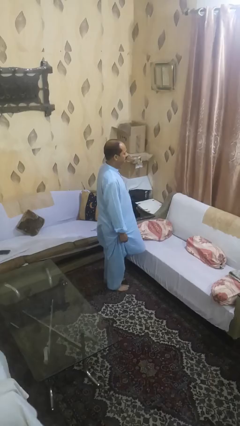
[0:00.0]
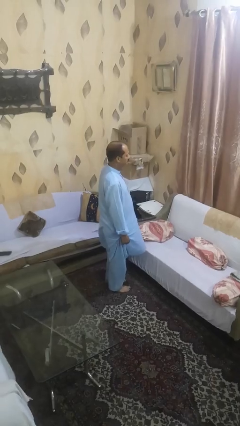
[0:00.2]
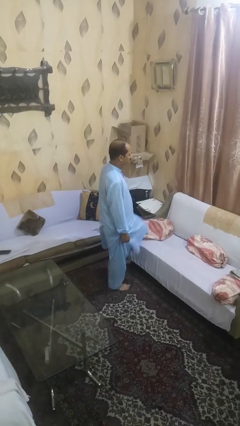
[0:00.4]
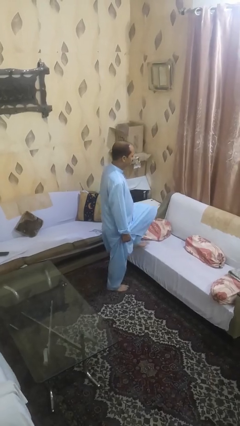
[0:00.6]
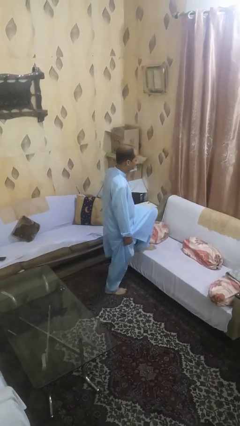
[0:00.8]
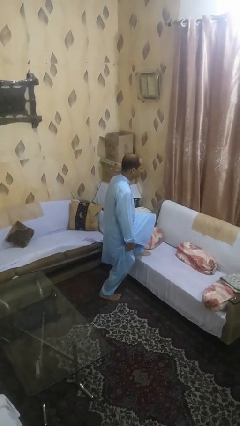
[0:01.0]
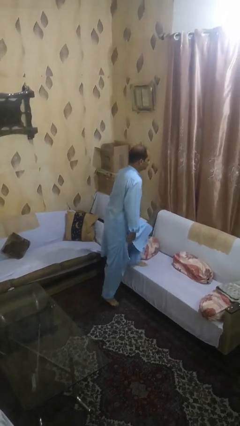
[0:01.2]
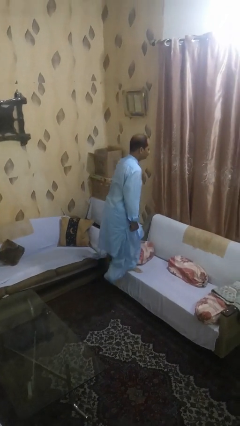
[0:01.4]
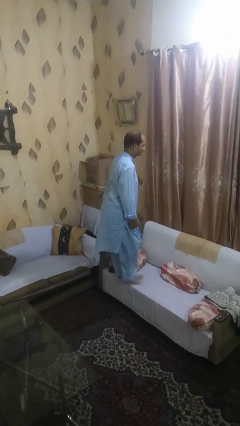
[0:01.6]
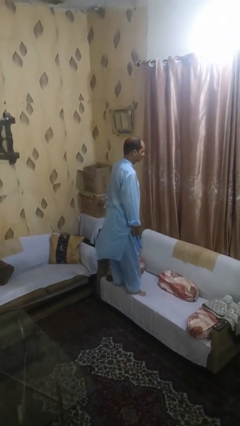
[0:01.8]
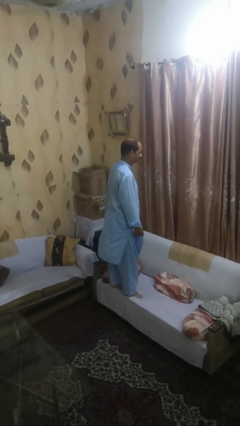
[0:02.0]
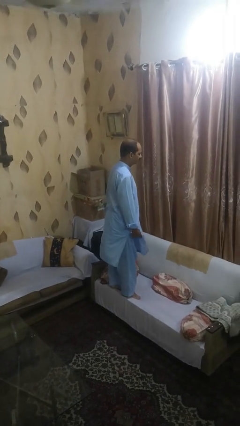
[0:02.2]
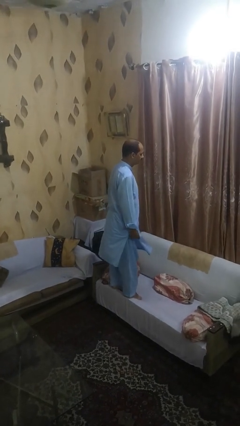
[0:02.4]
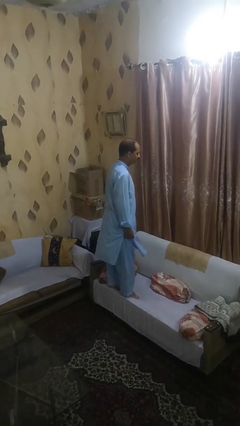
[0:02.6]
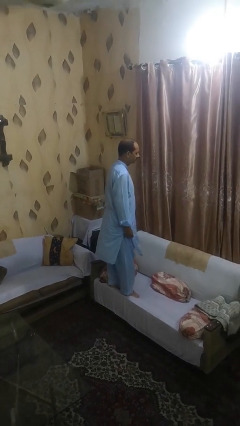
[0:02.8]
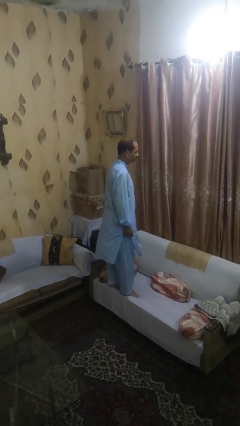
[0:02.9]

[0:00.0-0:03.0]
person climbs on chair

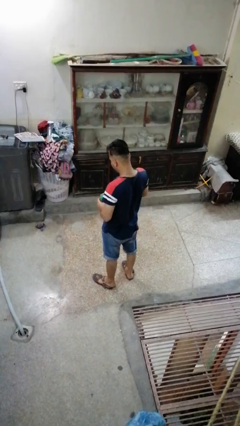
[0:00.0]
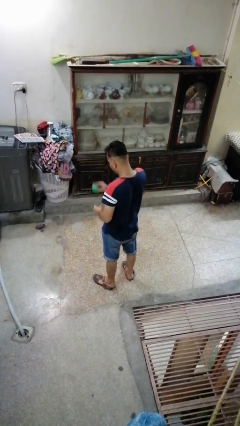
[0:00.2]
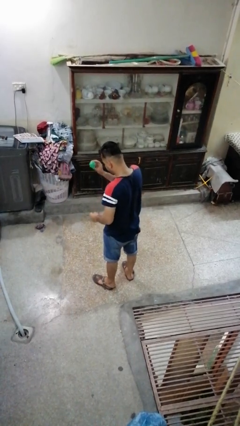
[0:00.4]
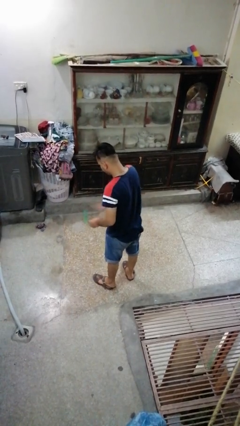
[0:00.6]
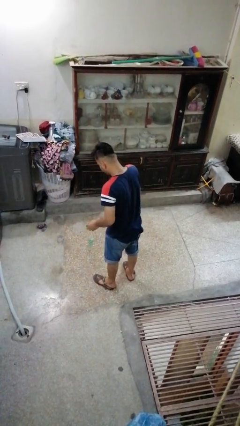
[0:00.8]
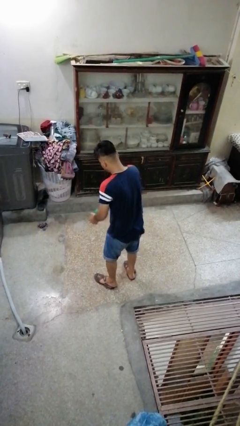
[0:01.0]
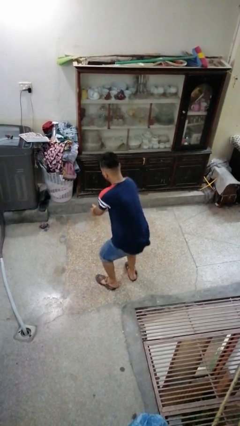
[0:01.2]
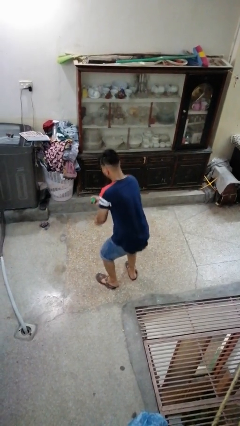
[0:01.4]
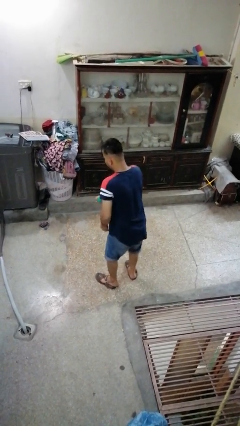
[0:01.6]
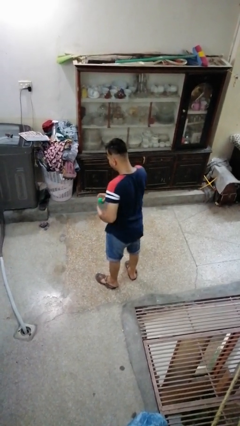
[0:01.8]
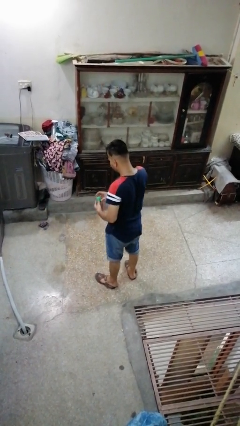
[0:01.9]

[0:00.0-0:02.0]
person bounces ball on floor

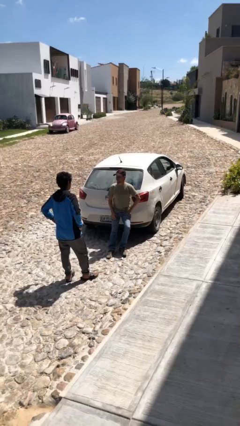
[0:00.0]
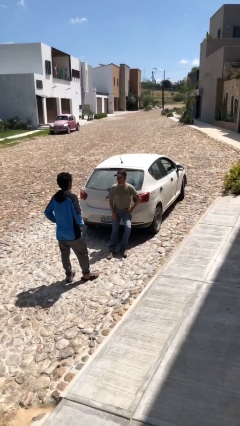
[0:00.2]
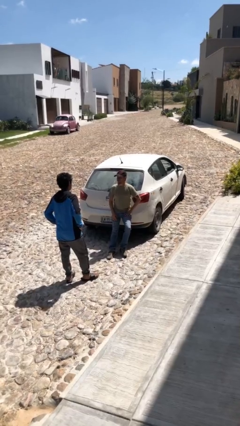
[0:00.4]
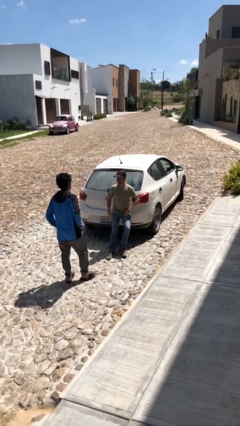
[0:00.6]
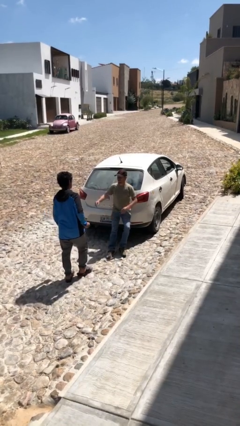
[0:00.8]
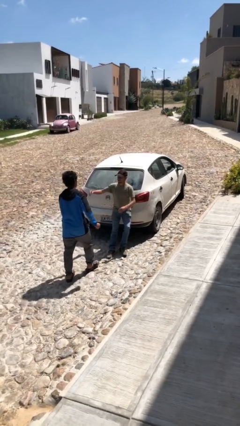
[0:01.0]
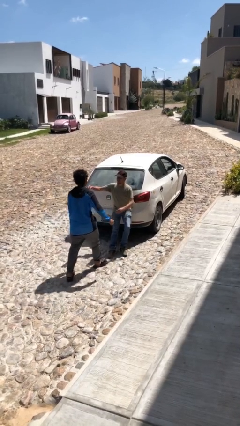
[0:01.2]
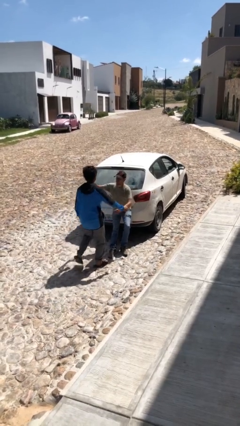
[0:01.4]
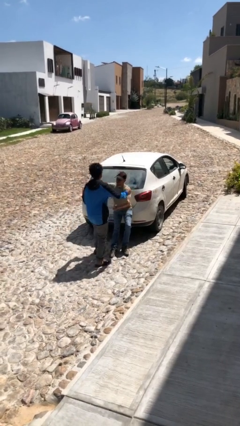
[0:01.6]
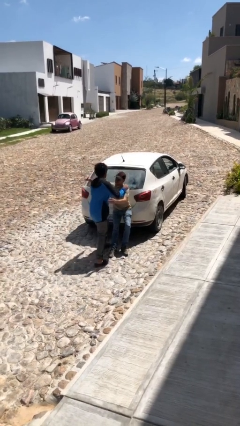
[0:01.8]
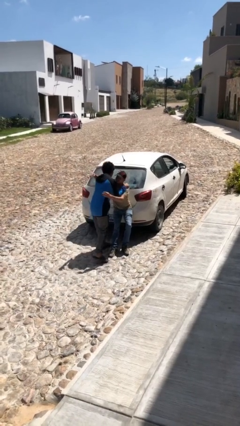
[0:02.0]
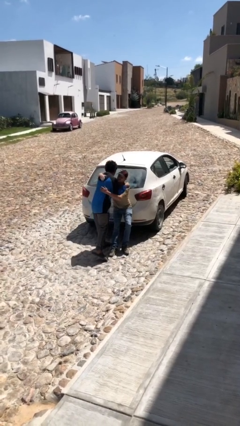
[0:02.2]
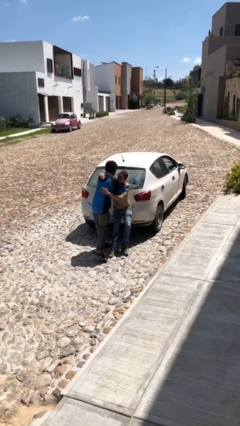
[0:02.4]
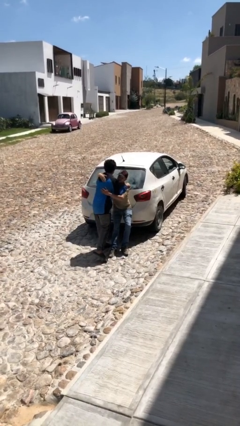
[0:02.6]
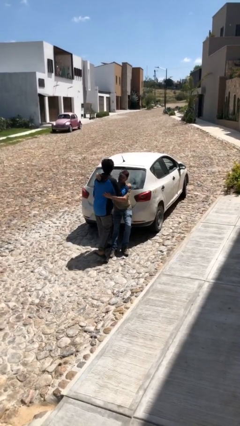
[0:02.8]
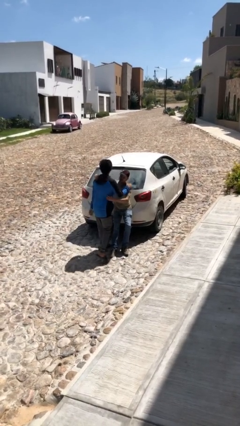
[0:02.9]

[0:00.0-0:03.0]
person embraces person

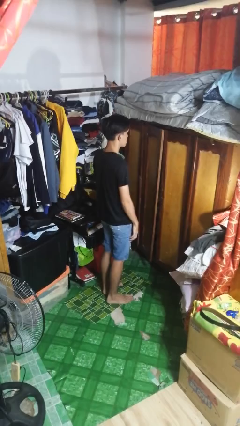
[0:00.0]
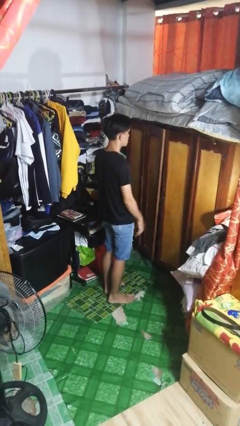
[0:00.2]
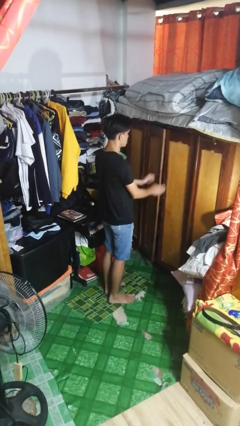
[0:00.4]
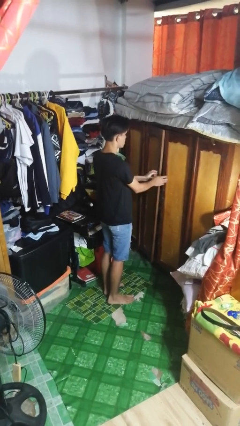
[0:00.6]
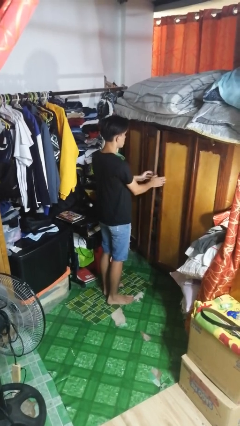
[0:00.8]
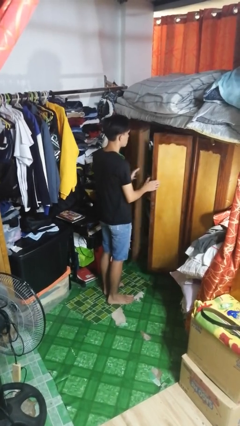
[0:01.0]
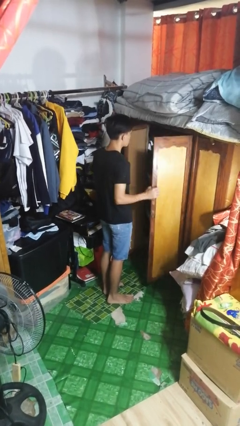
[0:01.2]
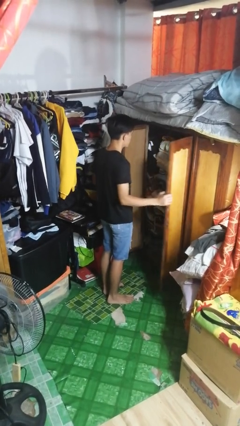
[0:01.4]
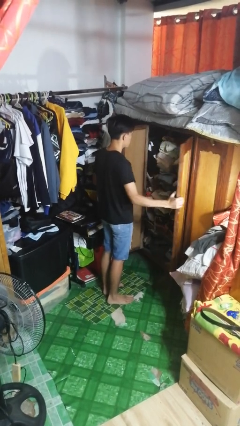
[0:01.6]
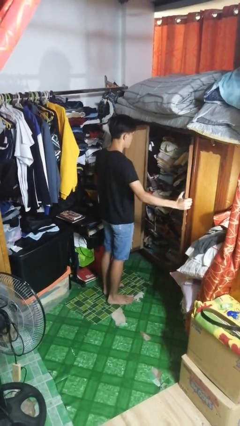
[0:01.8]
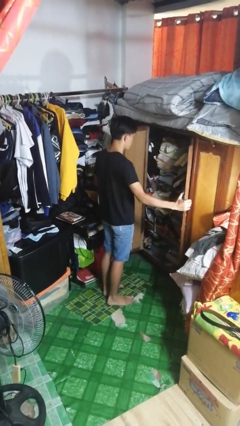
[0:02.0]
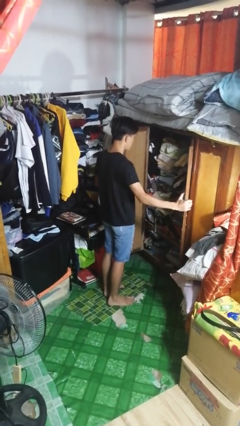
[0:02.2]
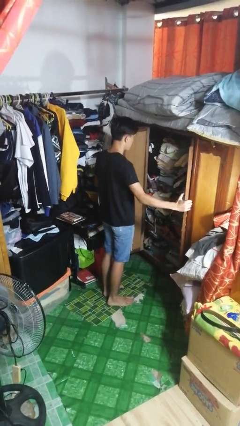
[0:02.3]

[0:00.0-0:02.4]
person opens closet door

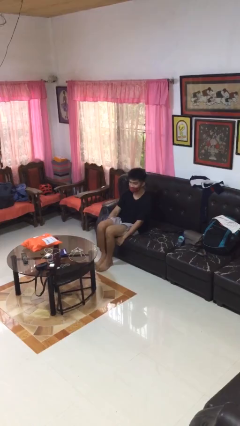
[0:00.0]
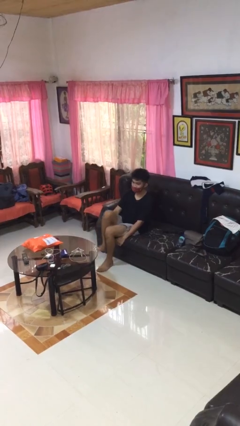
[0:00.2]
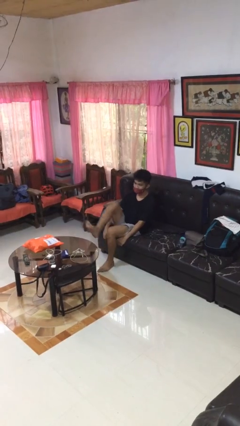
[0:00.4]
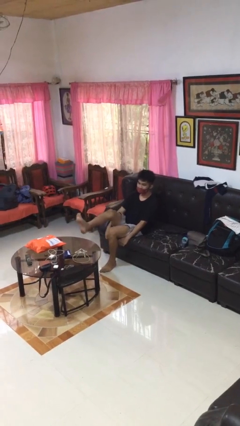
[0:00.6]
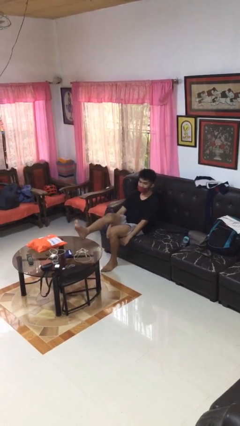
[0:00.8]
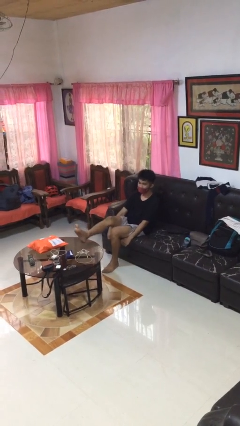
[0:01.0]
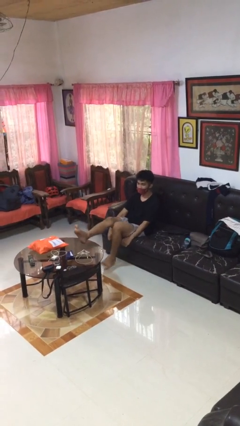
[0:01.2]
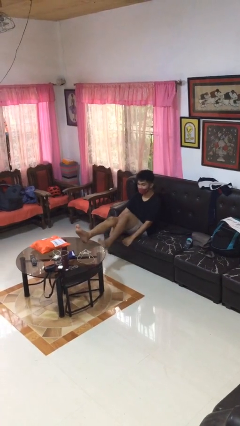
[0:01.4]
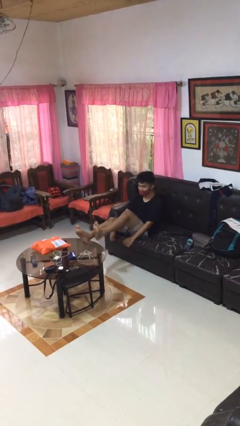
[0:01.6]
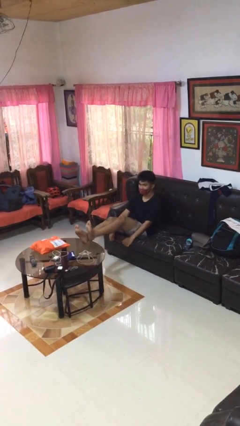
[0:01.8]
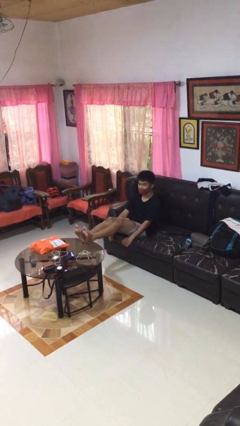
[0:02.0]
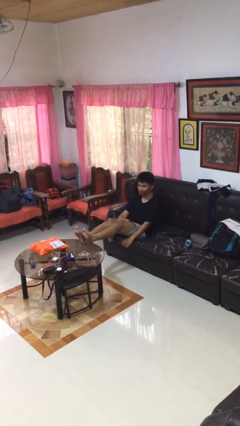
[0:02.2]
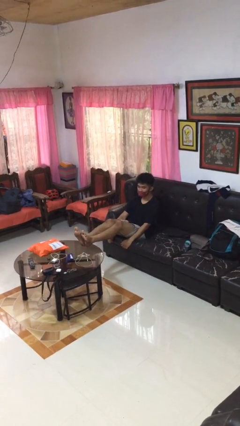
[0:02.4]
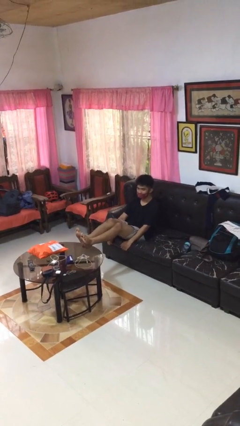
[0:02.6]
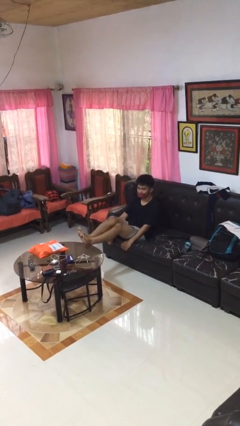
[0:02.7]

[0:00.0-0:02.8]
person puts feet up

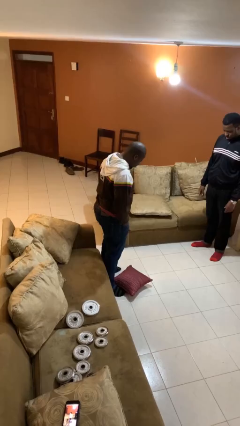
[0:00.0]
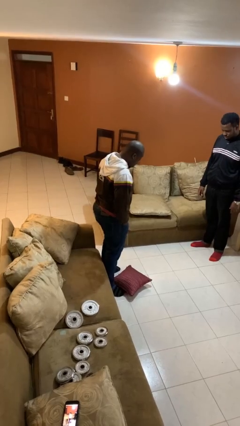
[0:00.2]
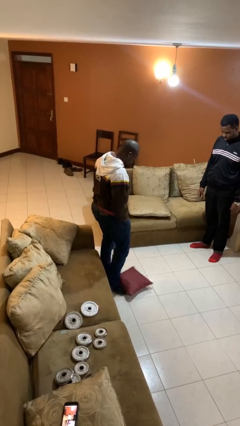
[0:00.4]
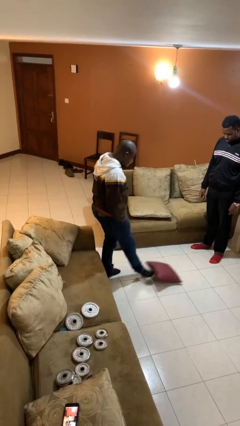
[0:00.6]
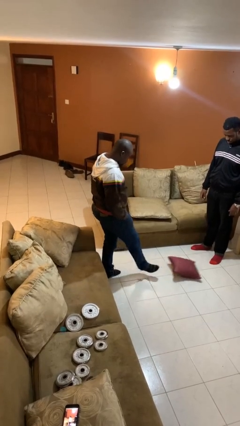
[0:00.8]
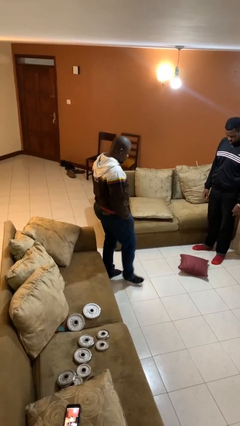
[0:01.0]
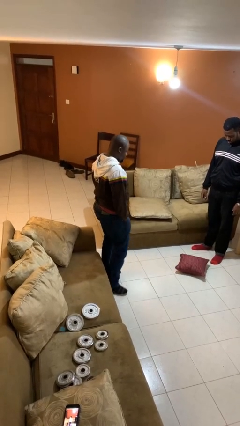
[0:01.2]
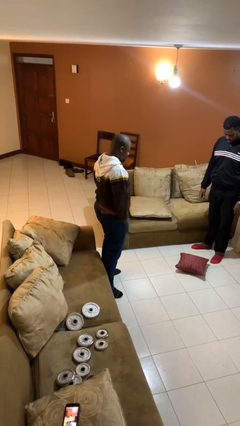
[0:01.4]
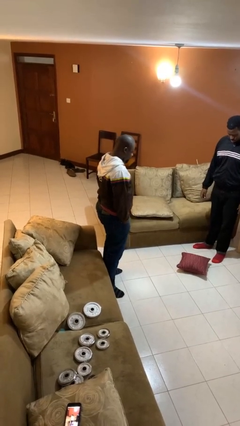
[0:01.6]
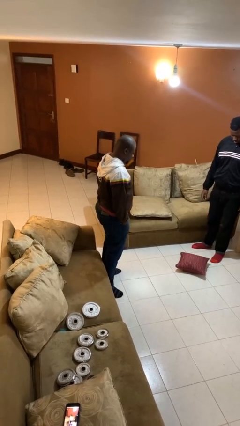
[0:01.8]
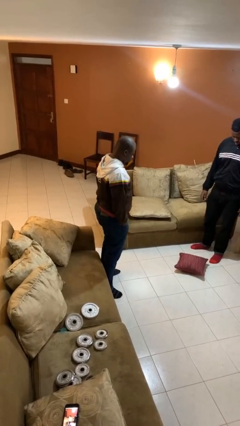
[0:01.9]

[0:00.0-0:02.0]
person kicks object to person

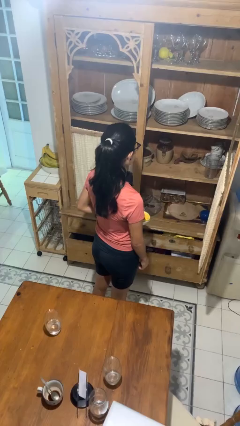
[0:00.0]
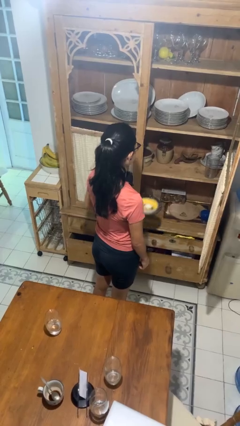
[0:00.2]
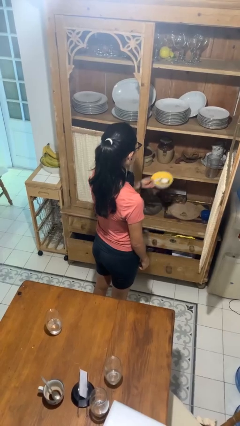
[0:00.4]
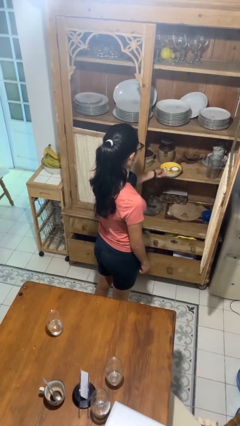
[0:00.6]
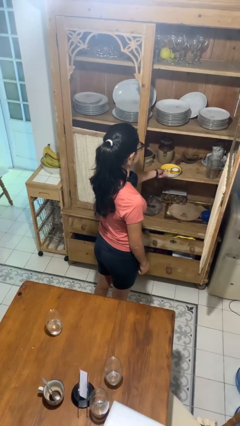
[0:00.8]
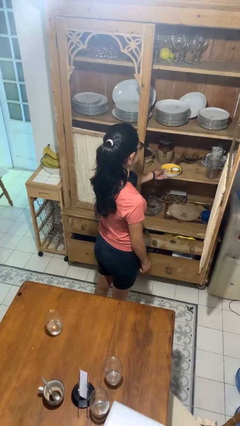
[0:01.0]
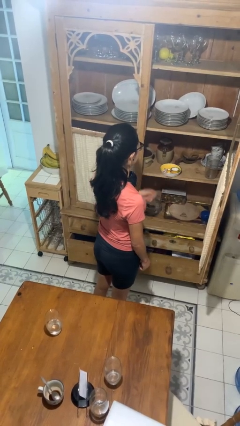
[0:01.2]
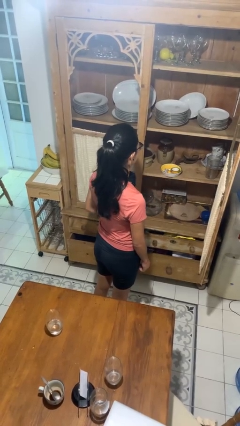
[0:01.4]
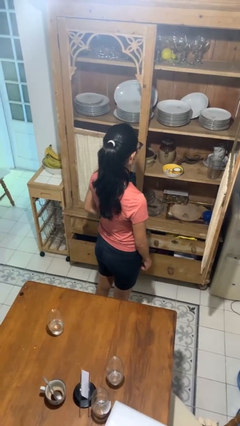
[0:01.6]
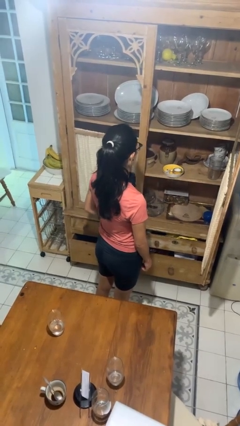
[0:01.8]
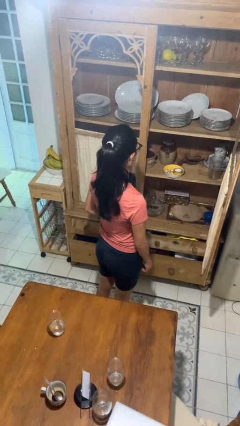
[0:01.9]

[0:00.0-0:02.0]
person puts object in cabinet
